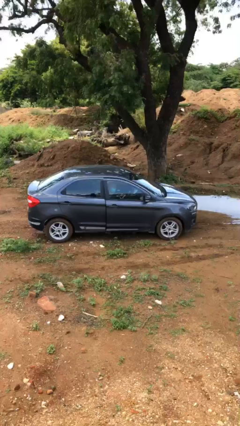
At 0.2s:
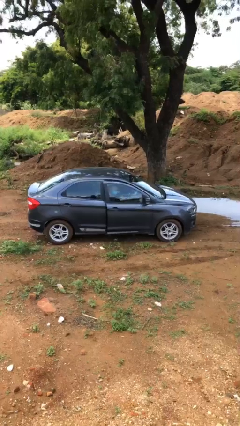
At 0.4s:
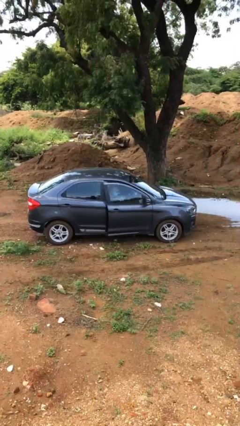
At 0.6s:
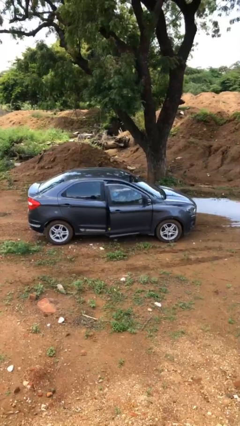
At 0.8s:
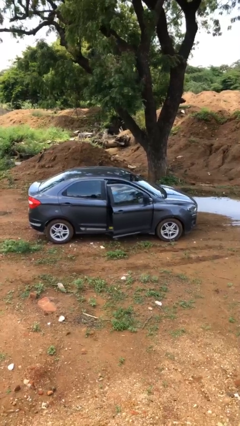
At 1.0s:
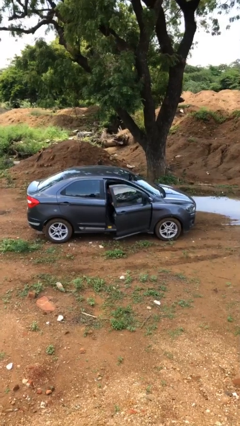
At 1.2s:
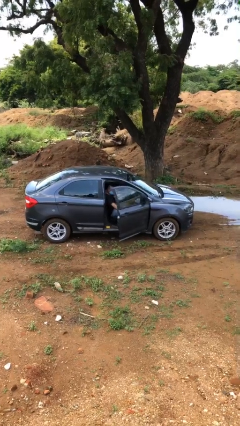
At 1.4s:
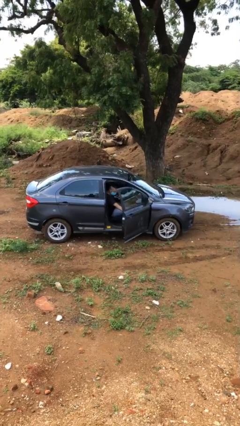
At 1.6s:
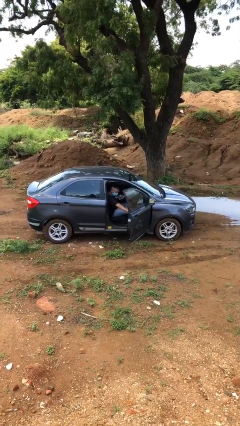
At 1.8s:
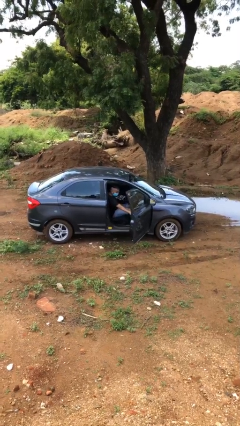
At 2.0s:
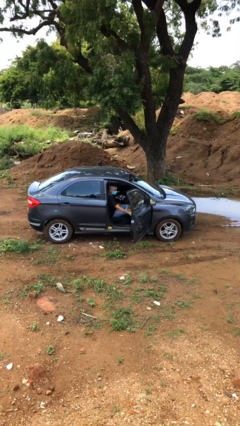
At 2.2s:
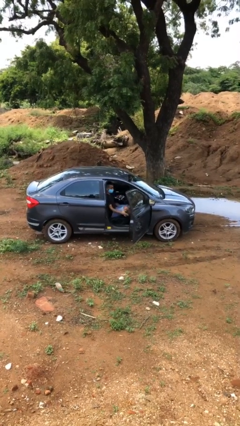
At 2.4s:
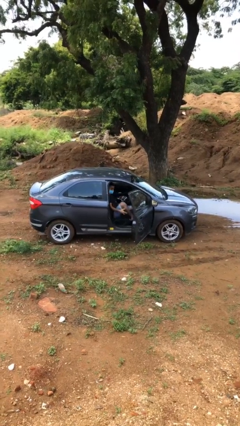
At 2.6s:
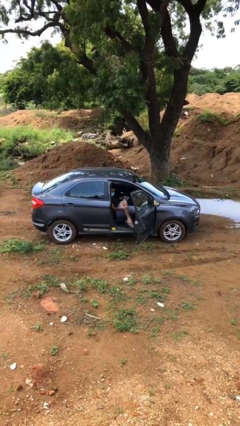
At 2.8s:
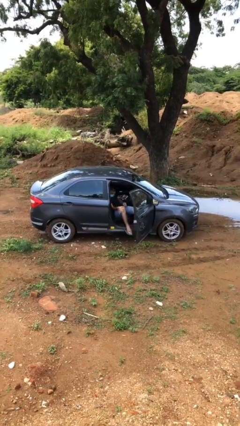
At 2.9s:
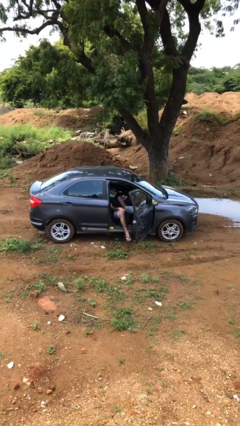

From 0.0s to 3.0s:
person opens car door

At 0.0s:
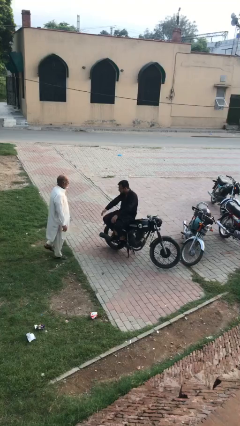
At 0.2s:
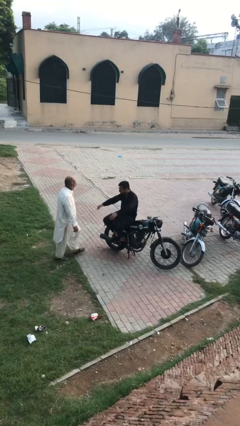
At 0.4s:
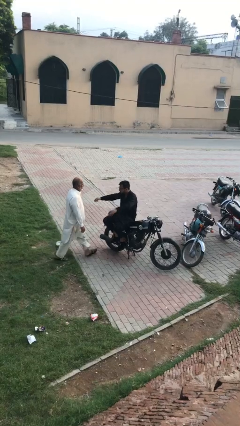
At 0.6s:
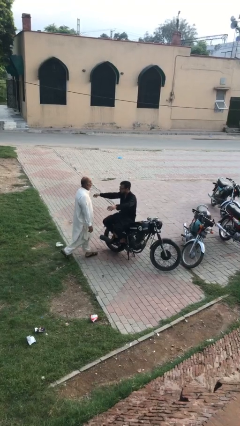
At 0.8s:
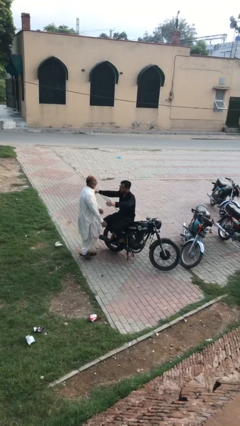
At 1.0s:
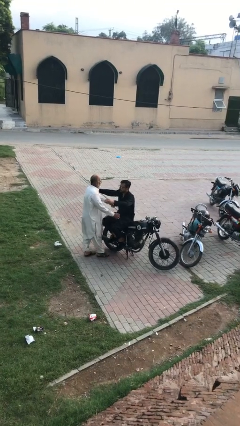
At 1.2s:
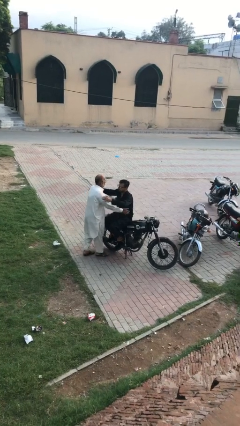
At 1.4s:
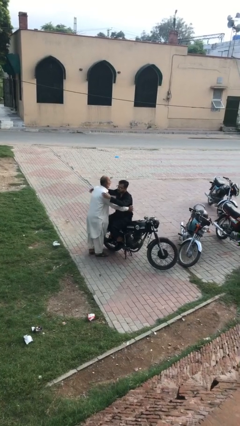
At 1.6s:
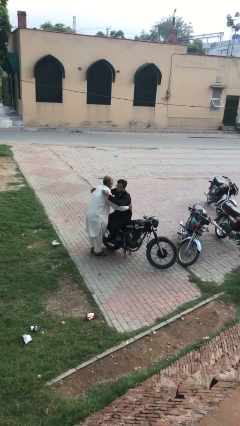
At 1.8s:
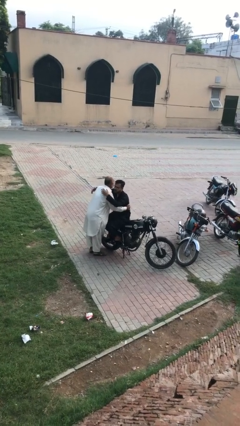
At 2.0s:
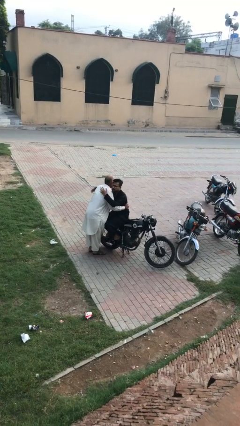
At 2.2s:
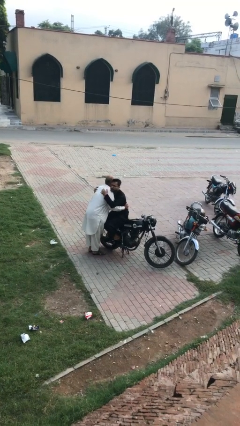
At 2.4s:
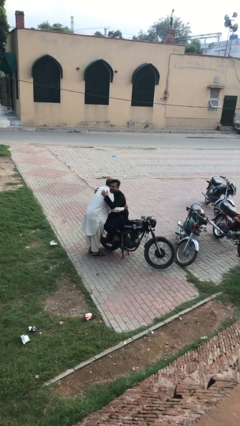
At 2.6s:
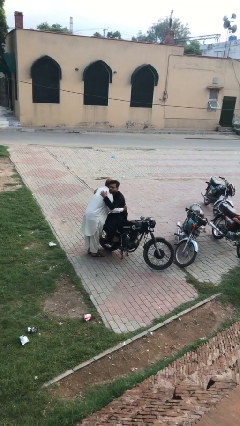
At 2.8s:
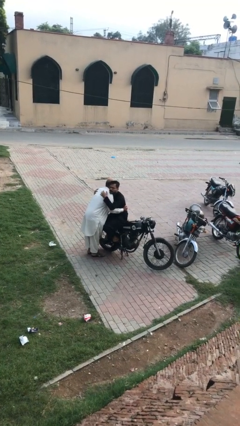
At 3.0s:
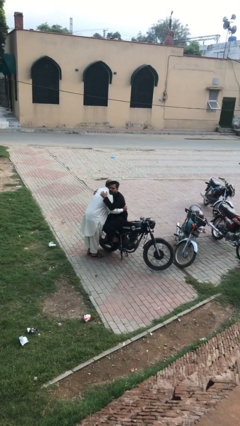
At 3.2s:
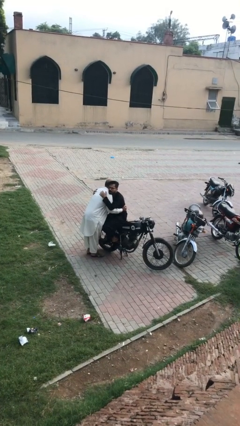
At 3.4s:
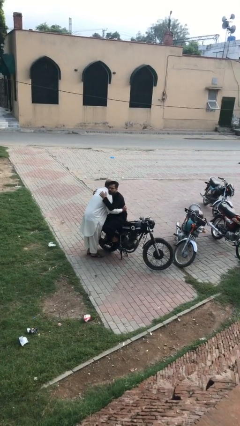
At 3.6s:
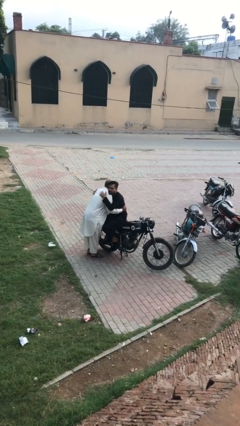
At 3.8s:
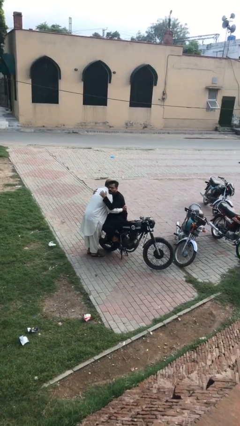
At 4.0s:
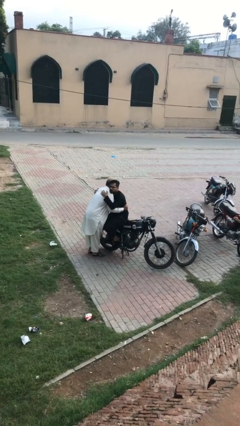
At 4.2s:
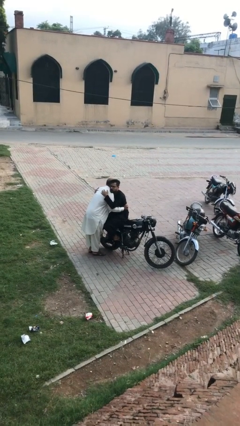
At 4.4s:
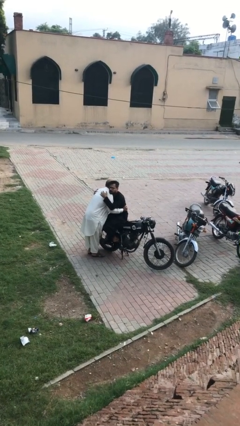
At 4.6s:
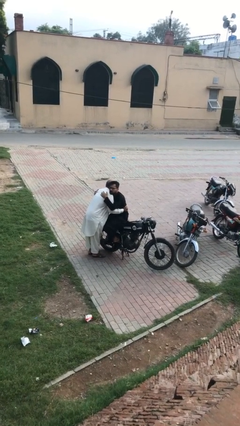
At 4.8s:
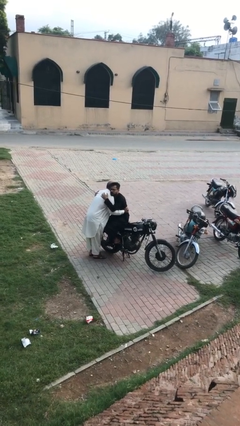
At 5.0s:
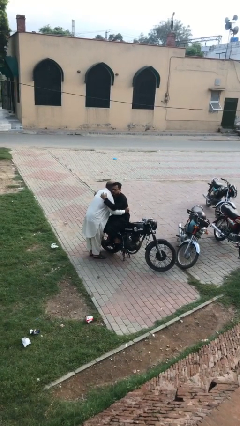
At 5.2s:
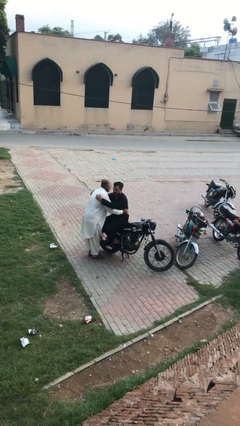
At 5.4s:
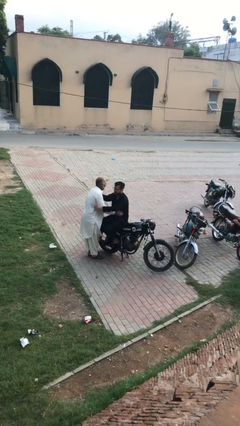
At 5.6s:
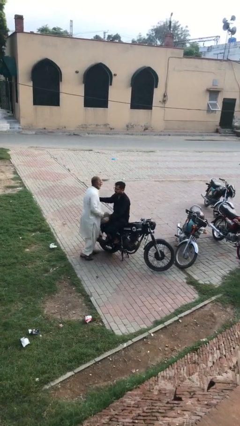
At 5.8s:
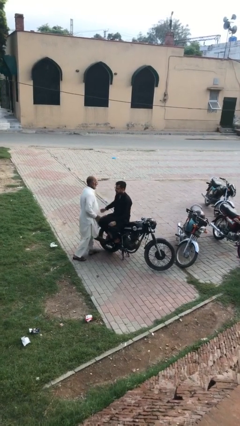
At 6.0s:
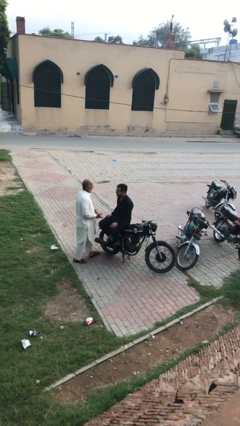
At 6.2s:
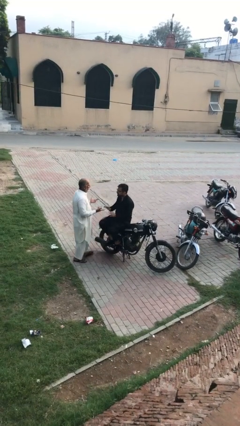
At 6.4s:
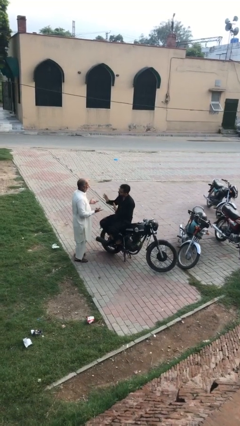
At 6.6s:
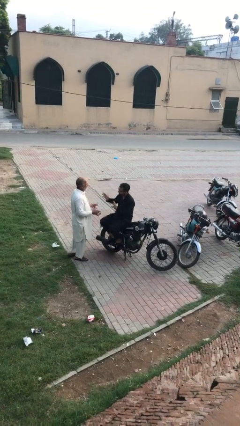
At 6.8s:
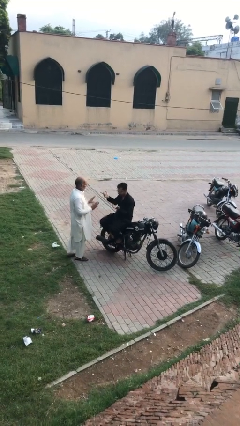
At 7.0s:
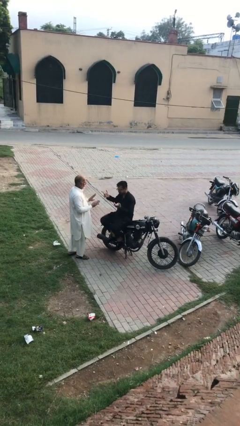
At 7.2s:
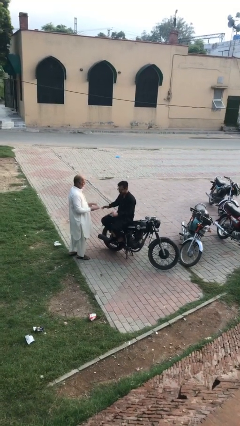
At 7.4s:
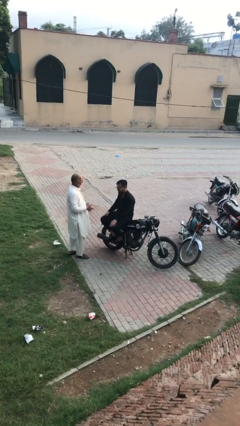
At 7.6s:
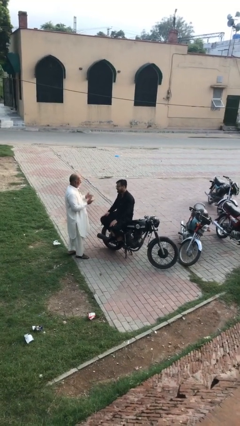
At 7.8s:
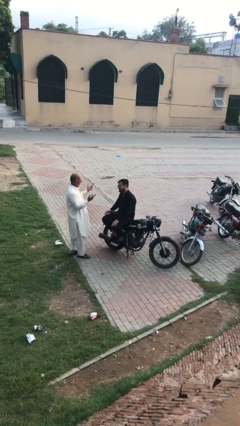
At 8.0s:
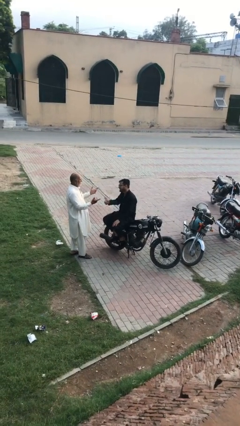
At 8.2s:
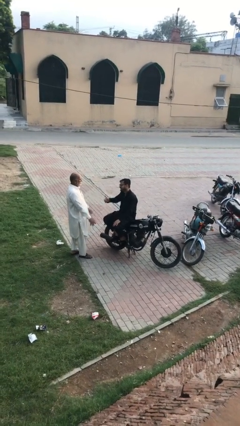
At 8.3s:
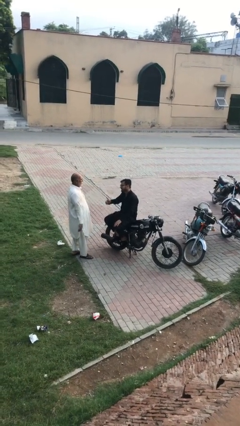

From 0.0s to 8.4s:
person embraces person

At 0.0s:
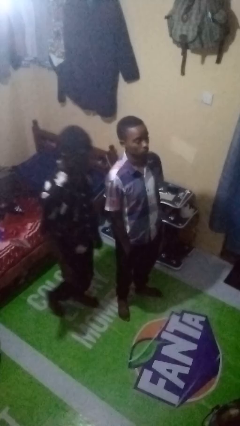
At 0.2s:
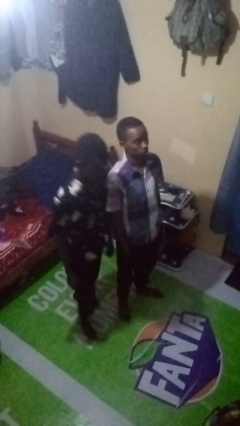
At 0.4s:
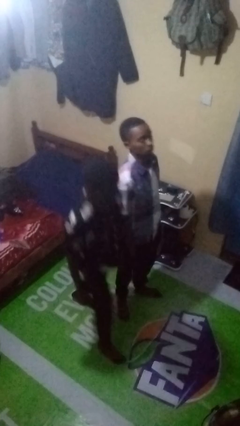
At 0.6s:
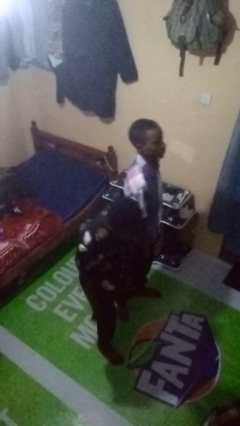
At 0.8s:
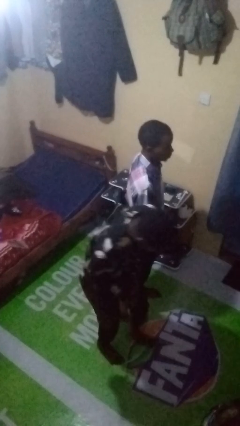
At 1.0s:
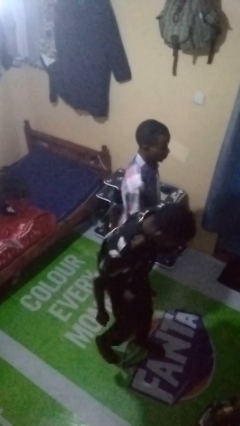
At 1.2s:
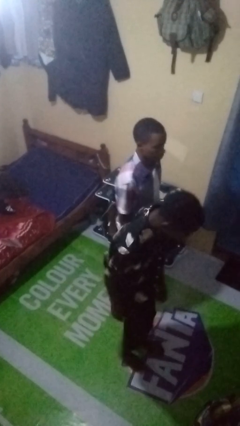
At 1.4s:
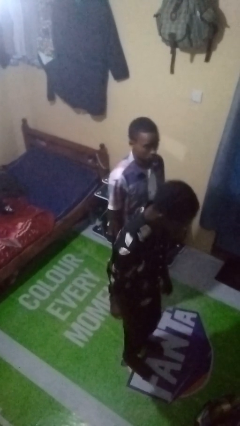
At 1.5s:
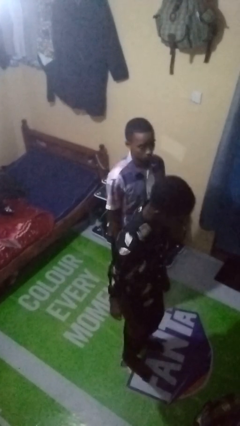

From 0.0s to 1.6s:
person bumps into person

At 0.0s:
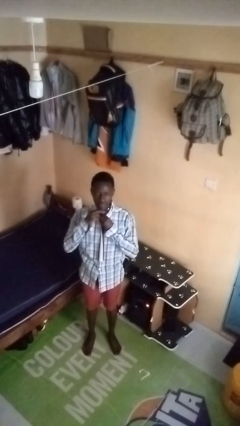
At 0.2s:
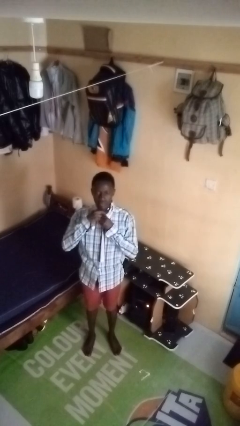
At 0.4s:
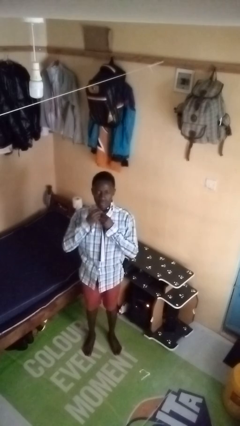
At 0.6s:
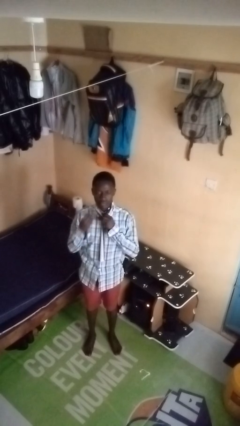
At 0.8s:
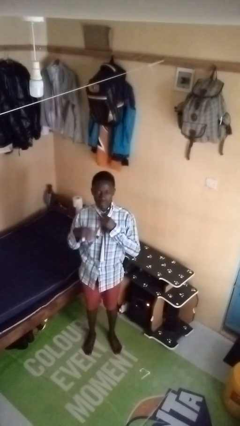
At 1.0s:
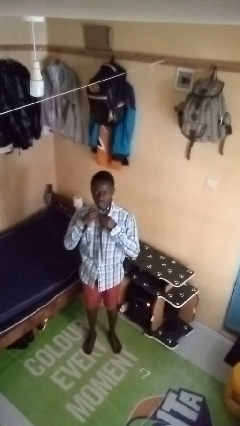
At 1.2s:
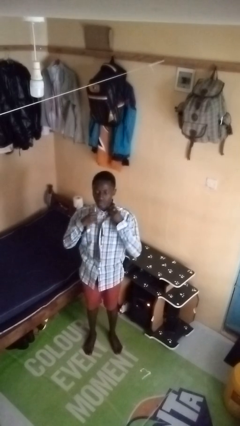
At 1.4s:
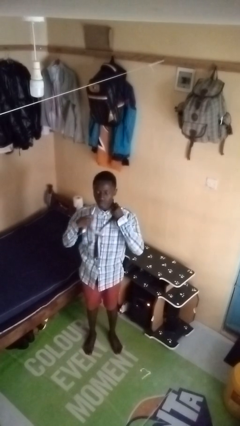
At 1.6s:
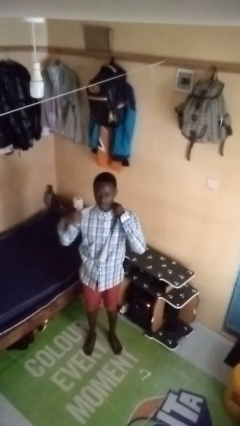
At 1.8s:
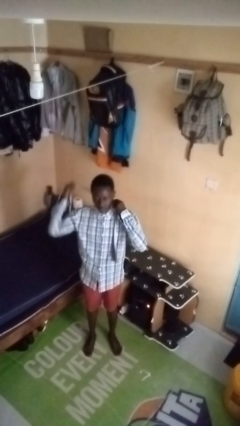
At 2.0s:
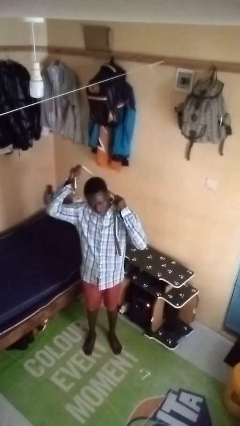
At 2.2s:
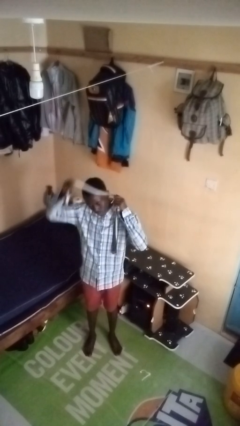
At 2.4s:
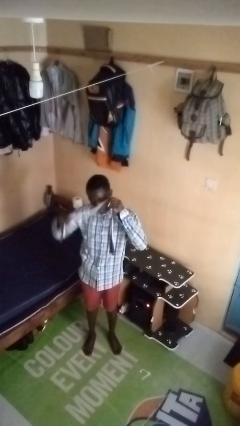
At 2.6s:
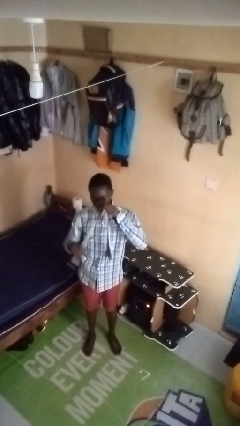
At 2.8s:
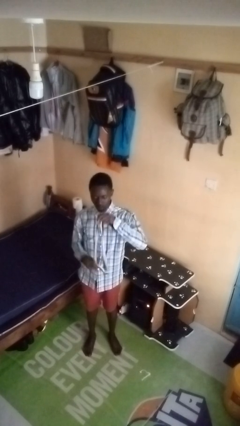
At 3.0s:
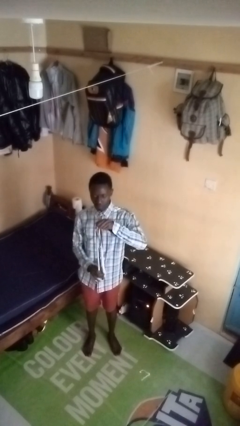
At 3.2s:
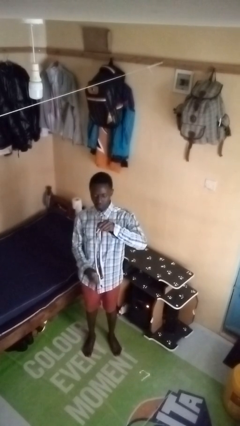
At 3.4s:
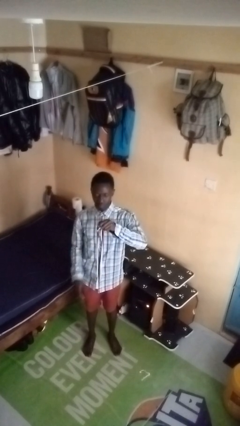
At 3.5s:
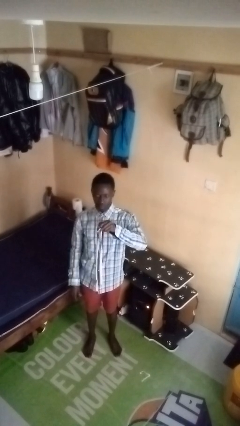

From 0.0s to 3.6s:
person takes off necktie

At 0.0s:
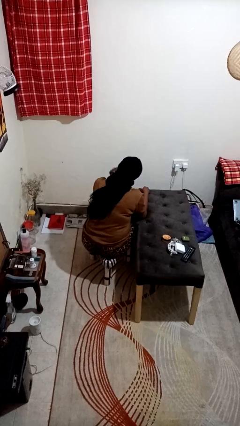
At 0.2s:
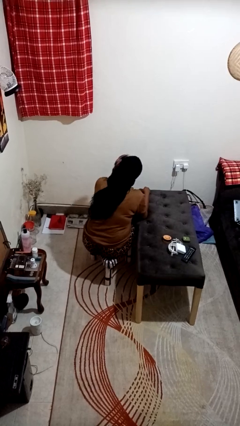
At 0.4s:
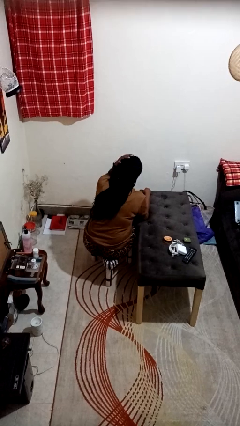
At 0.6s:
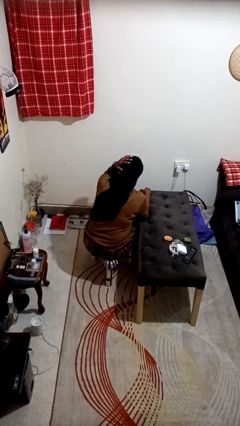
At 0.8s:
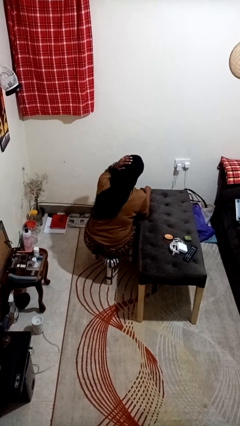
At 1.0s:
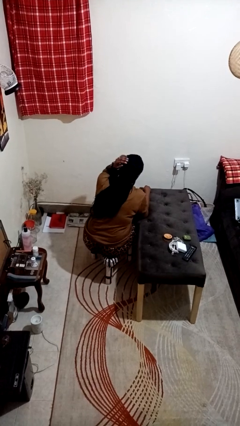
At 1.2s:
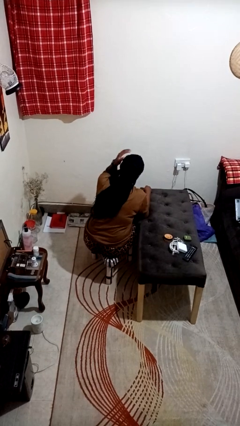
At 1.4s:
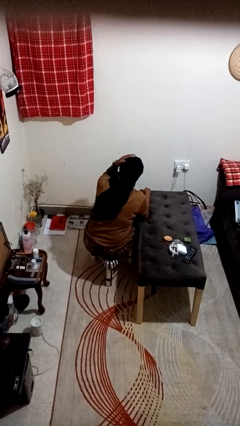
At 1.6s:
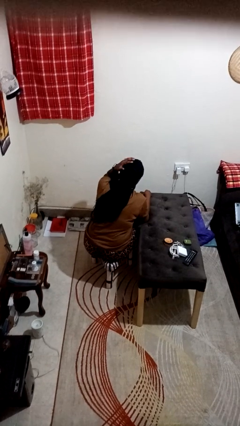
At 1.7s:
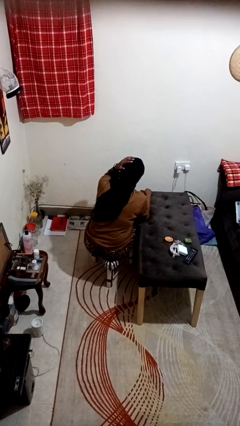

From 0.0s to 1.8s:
person strokes hair
